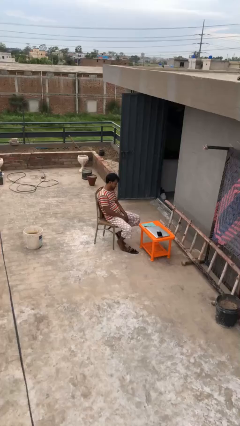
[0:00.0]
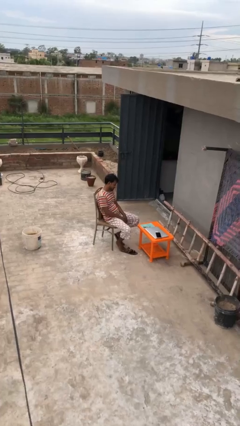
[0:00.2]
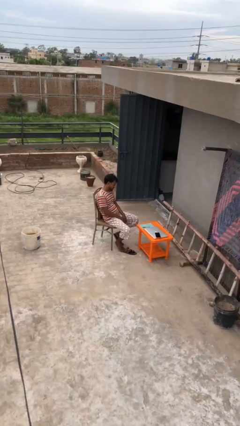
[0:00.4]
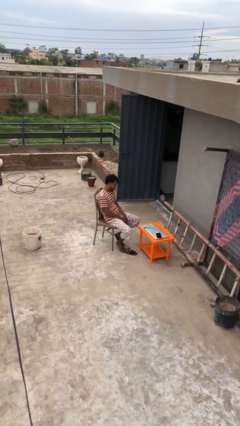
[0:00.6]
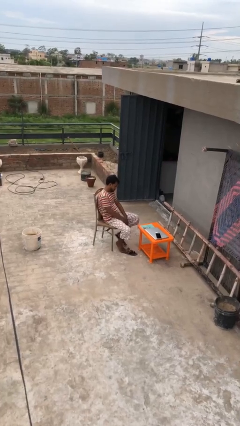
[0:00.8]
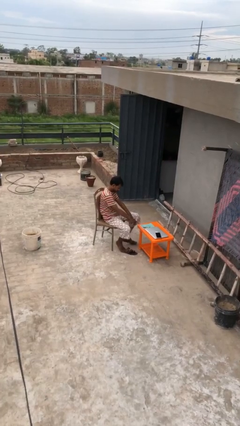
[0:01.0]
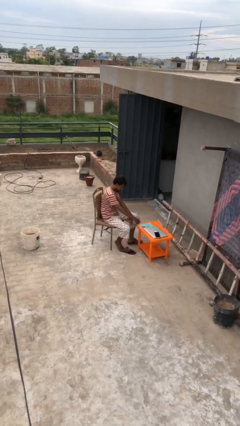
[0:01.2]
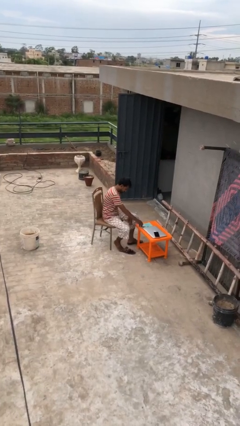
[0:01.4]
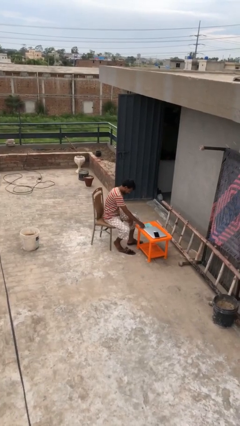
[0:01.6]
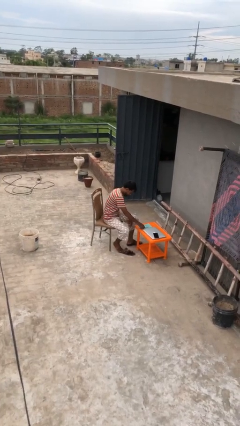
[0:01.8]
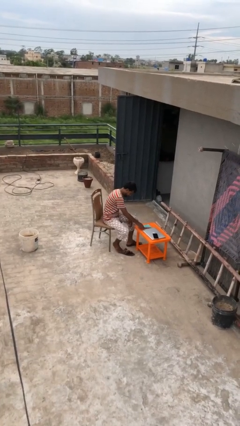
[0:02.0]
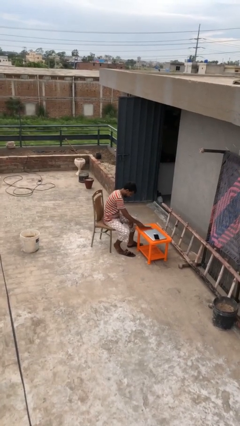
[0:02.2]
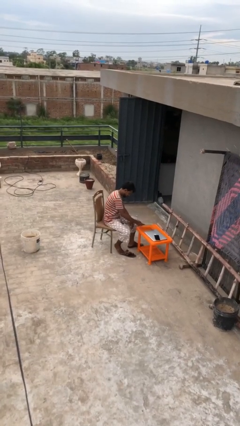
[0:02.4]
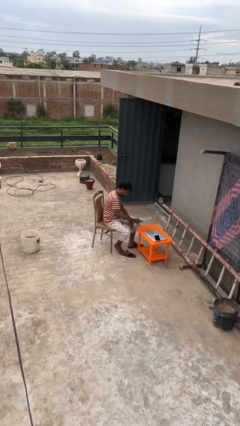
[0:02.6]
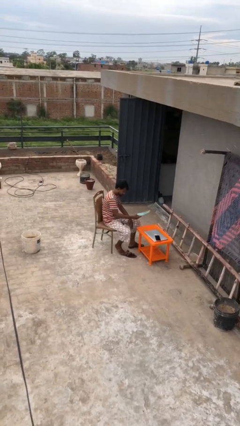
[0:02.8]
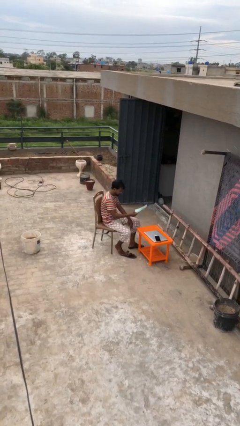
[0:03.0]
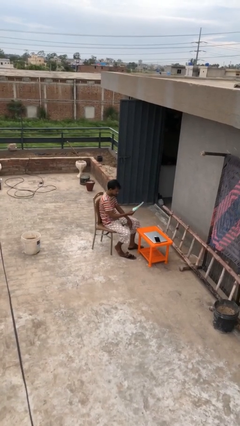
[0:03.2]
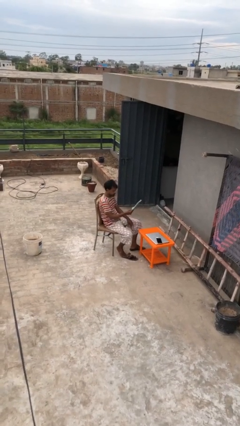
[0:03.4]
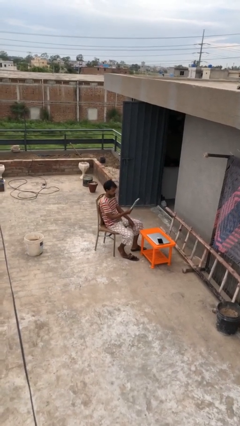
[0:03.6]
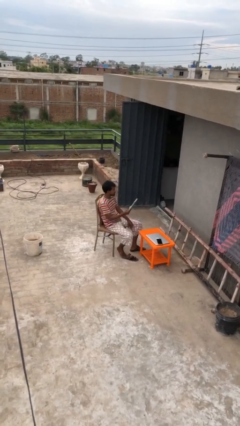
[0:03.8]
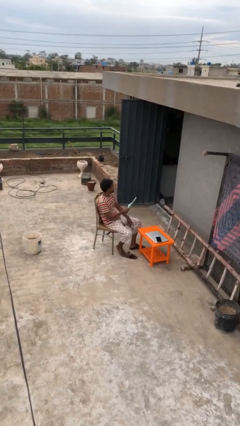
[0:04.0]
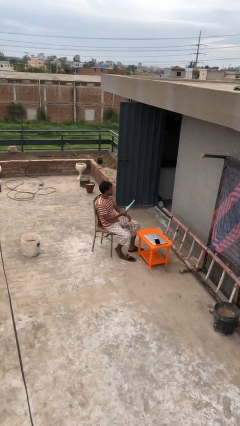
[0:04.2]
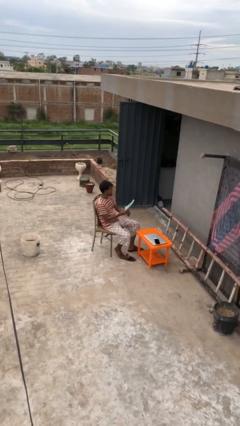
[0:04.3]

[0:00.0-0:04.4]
person picks up object from table

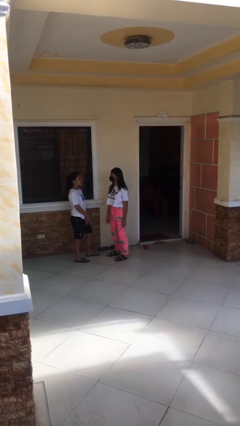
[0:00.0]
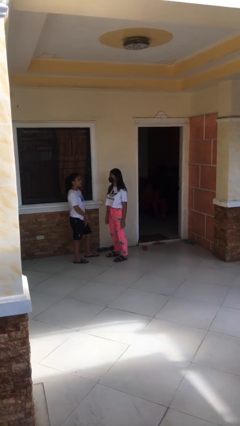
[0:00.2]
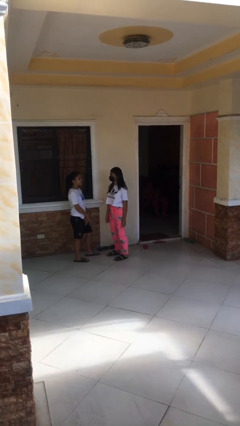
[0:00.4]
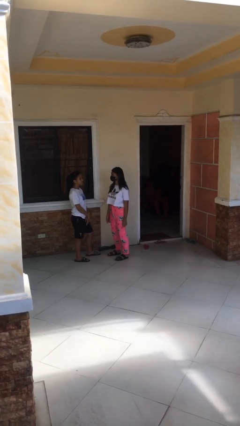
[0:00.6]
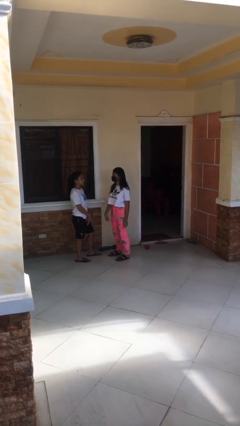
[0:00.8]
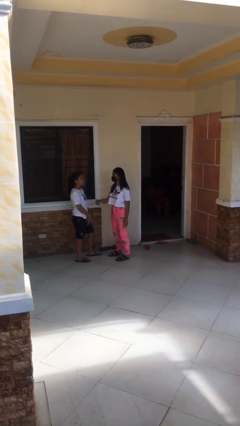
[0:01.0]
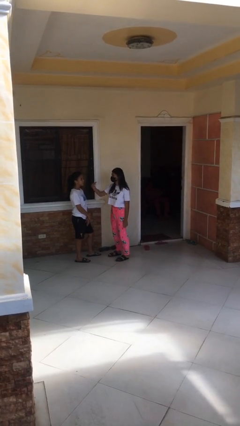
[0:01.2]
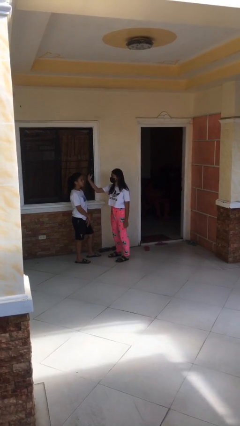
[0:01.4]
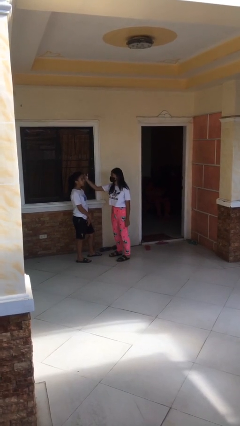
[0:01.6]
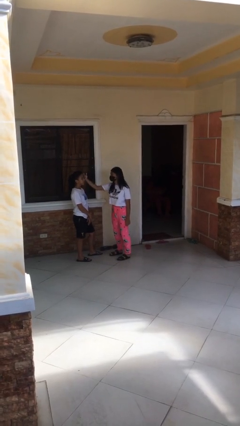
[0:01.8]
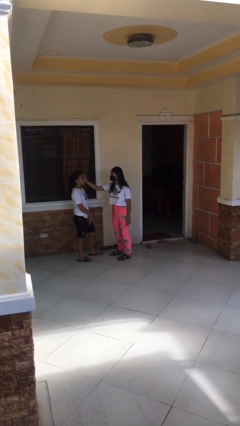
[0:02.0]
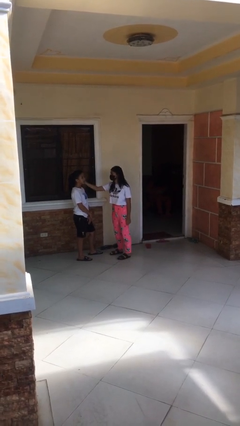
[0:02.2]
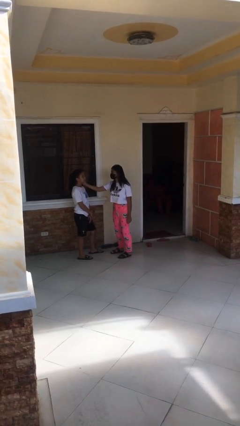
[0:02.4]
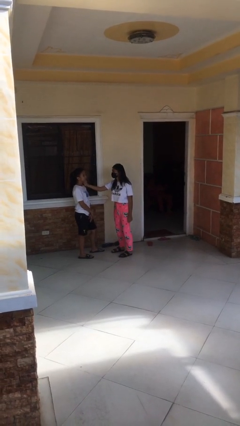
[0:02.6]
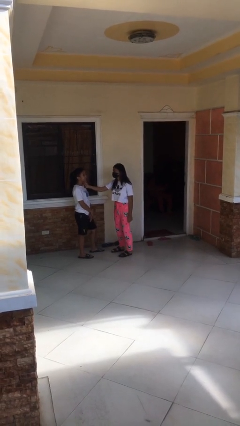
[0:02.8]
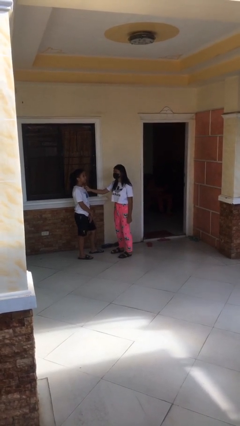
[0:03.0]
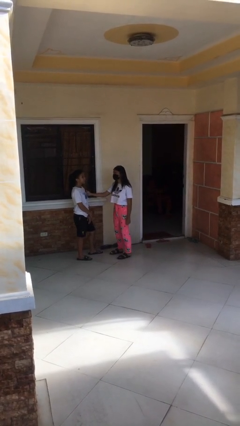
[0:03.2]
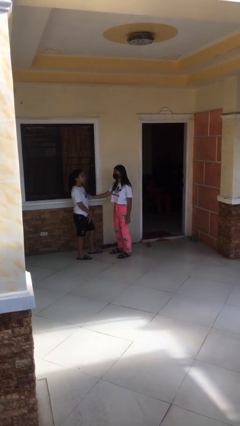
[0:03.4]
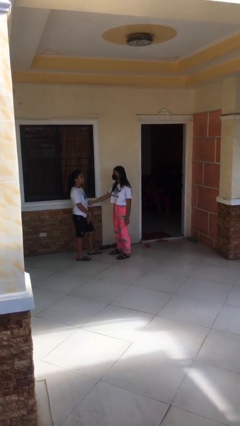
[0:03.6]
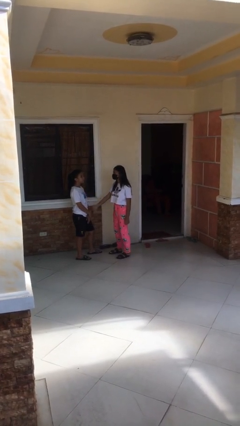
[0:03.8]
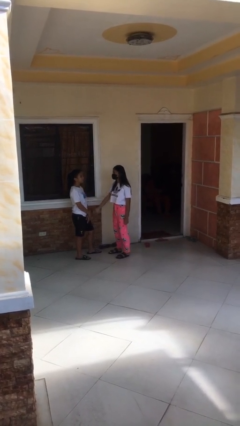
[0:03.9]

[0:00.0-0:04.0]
person touches face of person

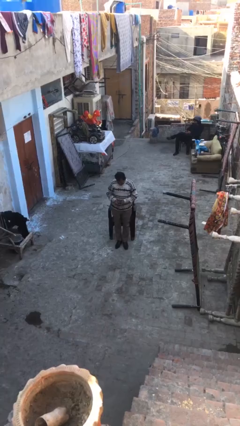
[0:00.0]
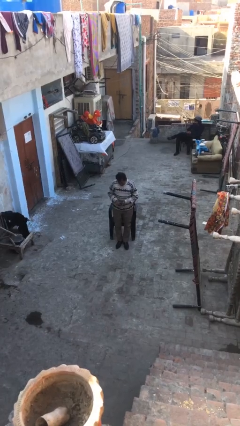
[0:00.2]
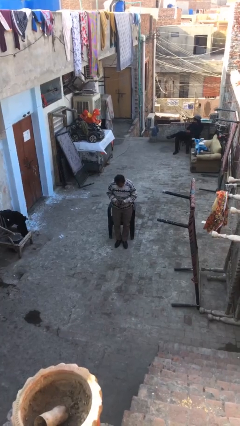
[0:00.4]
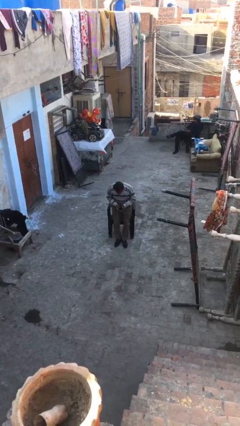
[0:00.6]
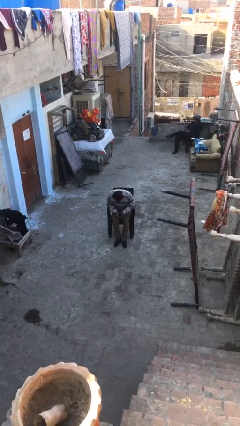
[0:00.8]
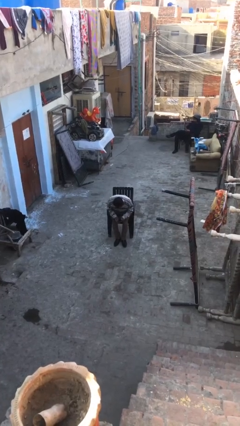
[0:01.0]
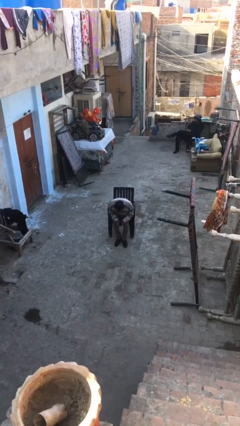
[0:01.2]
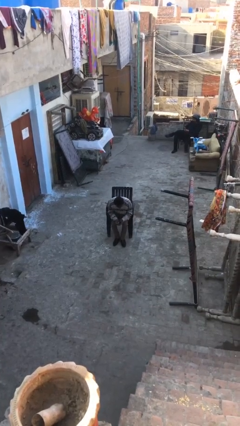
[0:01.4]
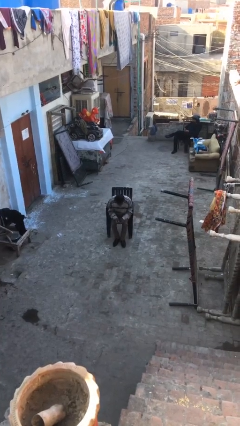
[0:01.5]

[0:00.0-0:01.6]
person sits down

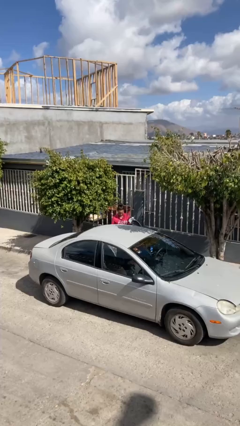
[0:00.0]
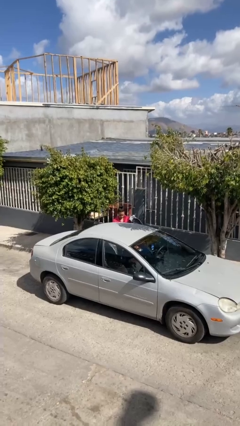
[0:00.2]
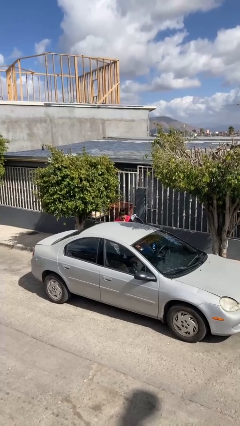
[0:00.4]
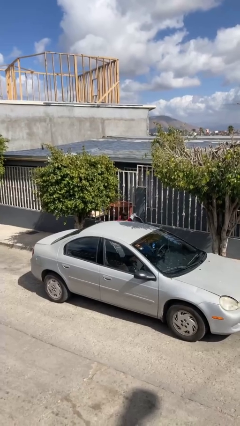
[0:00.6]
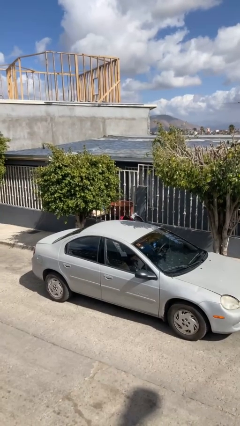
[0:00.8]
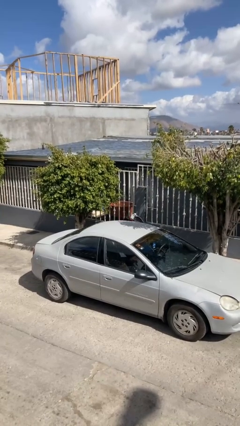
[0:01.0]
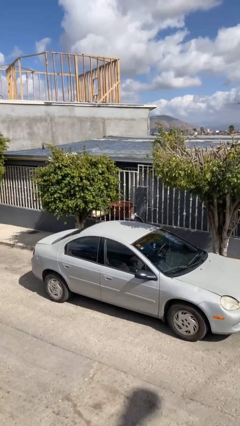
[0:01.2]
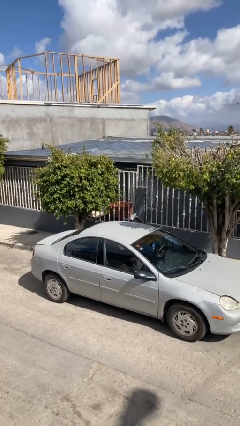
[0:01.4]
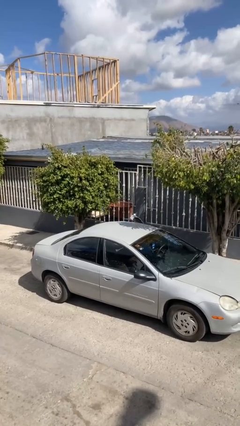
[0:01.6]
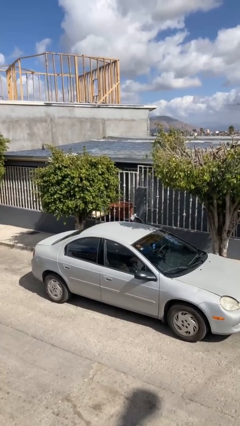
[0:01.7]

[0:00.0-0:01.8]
person enters car

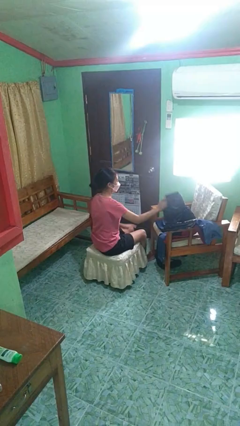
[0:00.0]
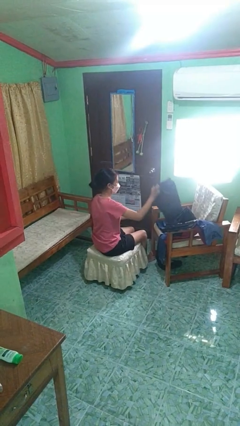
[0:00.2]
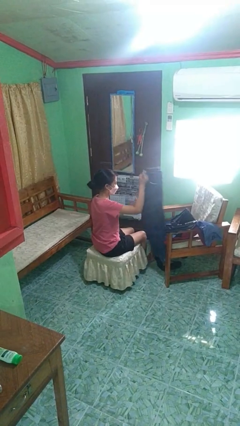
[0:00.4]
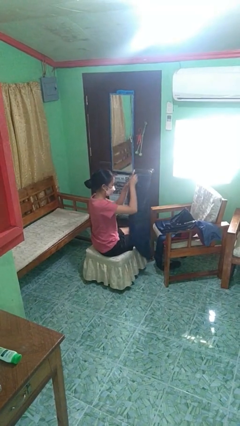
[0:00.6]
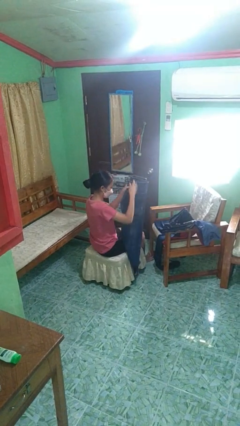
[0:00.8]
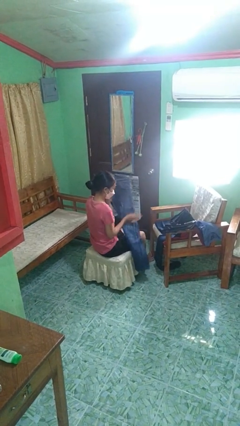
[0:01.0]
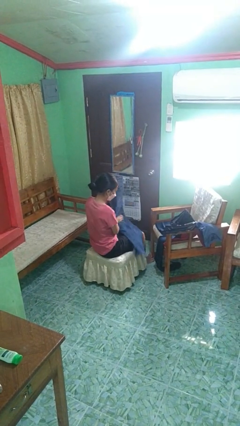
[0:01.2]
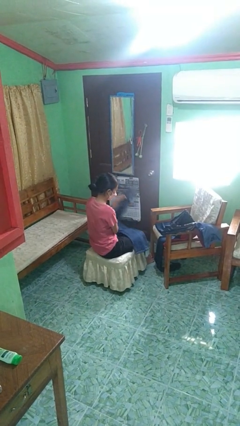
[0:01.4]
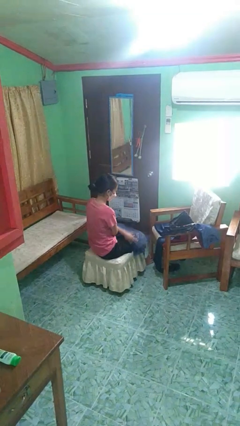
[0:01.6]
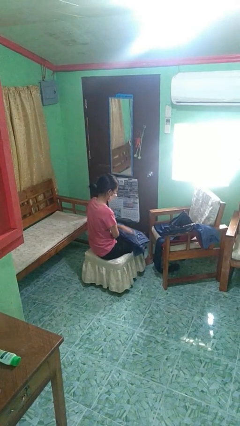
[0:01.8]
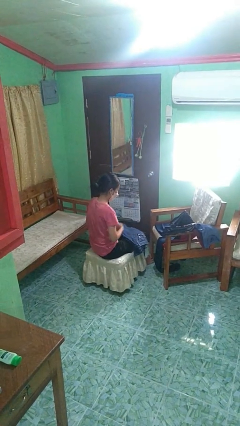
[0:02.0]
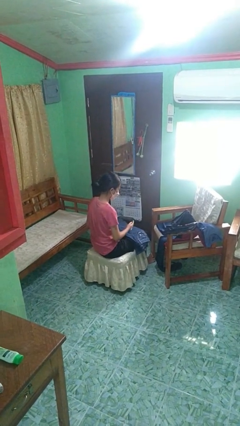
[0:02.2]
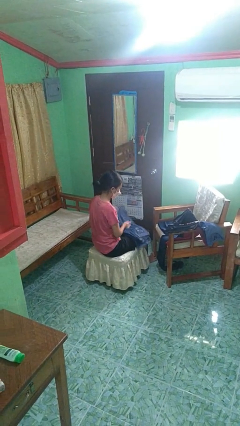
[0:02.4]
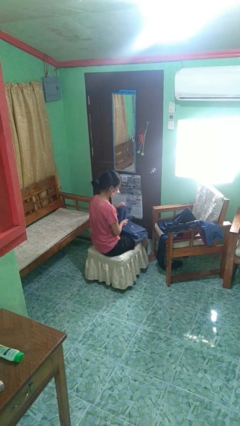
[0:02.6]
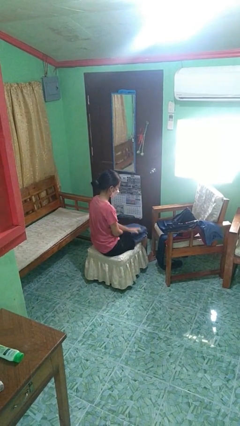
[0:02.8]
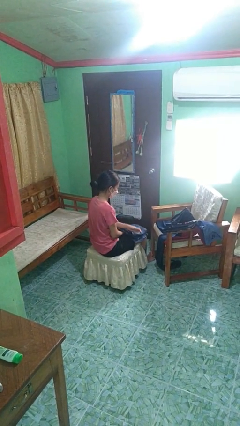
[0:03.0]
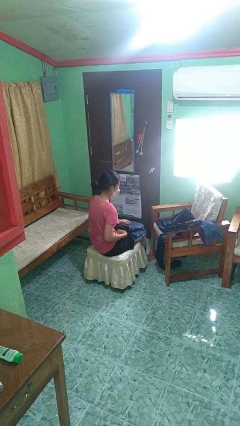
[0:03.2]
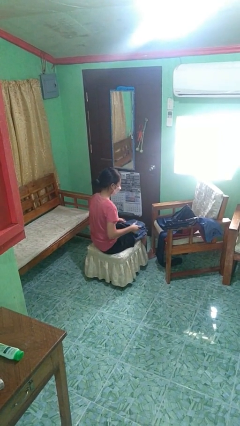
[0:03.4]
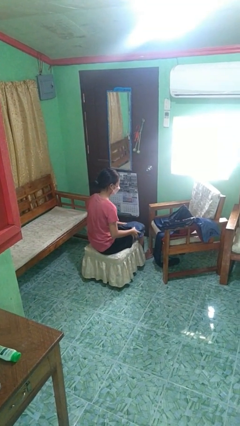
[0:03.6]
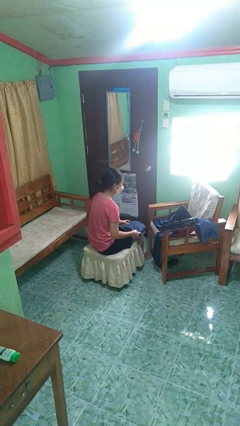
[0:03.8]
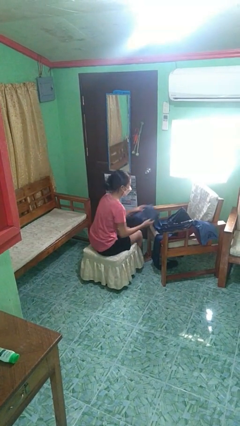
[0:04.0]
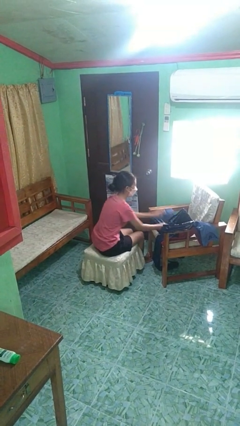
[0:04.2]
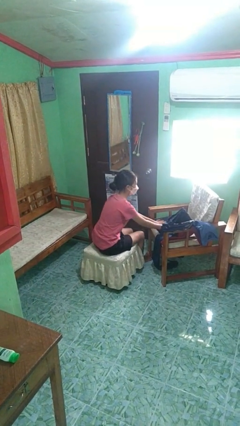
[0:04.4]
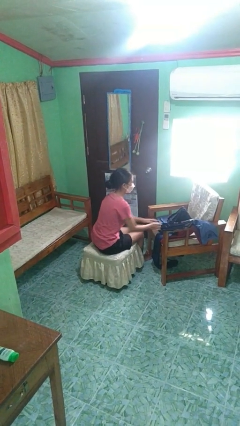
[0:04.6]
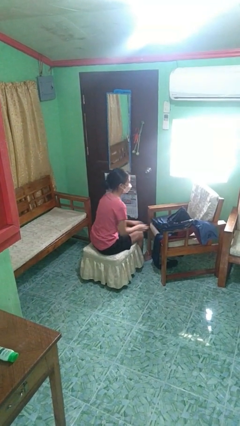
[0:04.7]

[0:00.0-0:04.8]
person folds pants

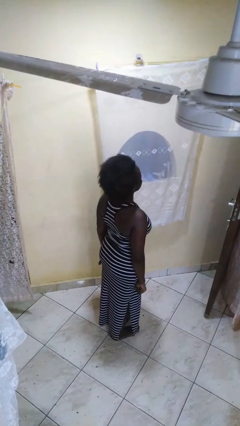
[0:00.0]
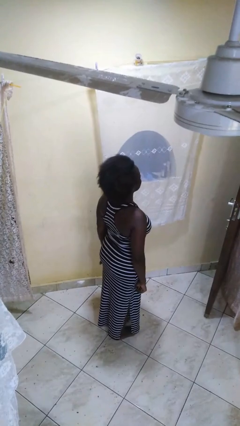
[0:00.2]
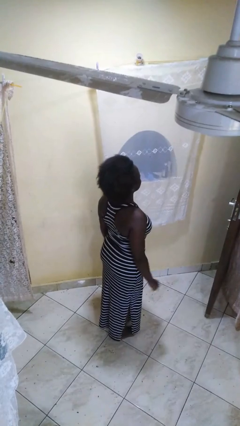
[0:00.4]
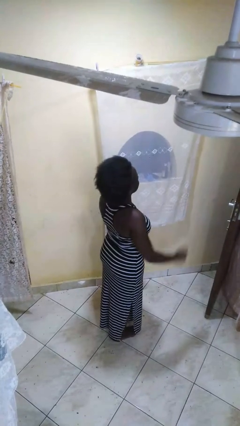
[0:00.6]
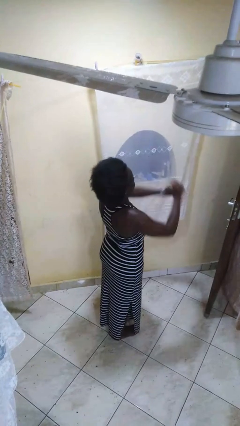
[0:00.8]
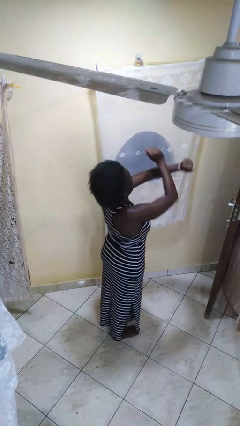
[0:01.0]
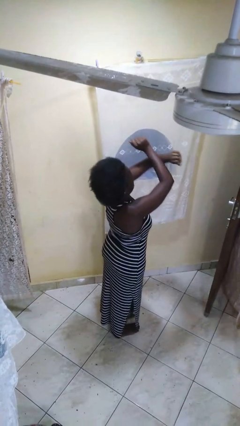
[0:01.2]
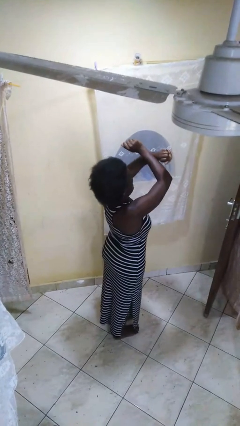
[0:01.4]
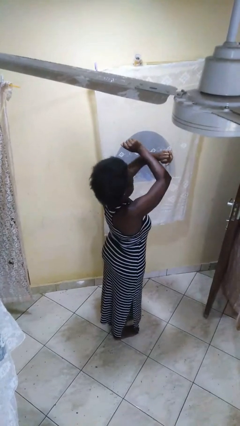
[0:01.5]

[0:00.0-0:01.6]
person gestures arms x
